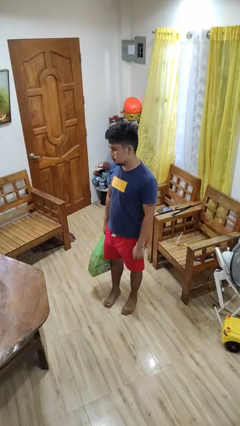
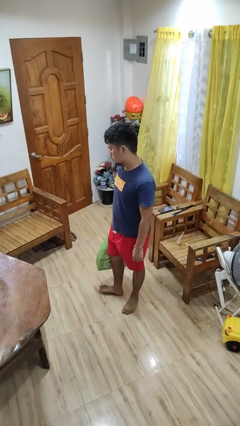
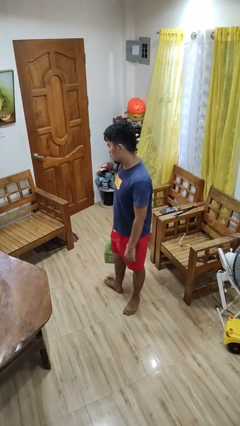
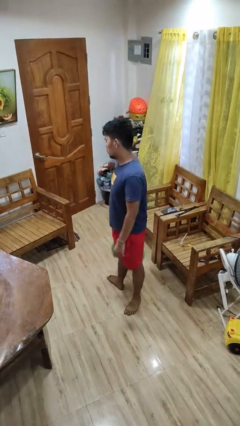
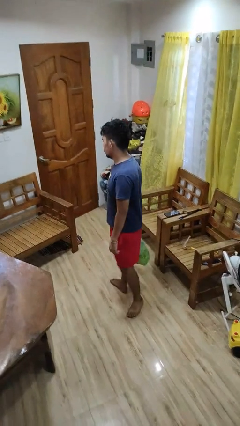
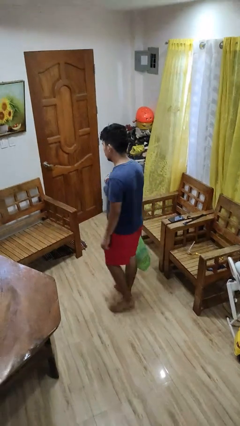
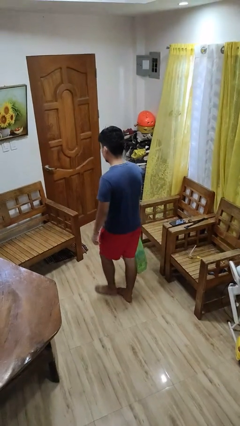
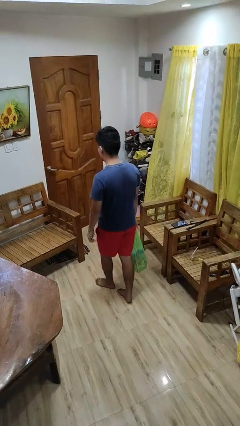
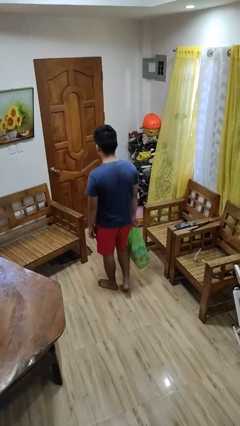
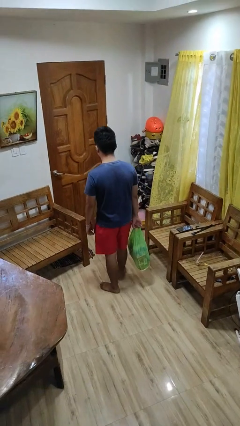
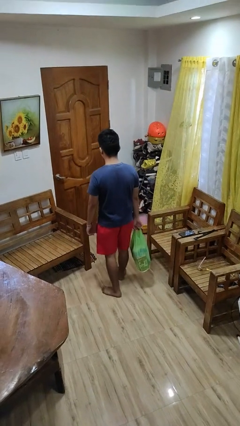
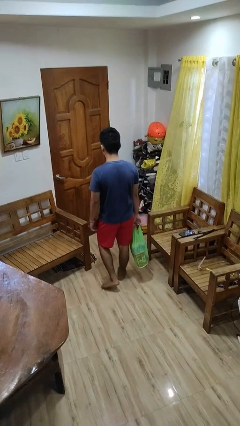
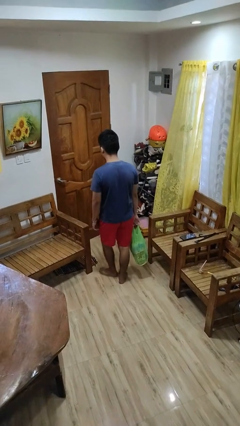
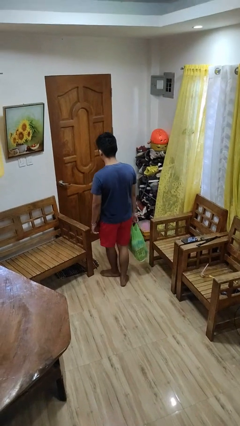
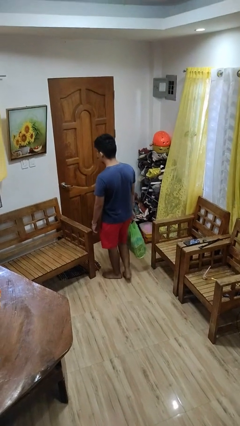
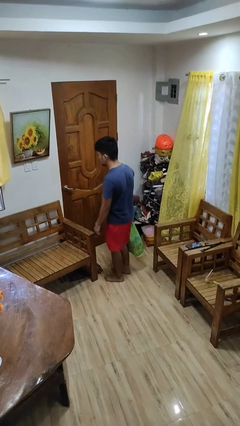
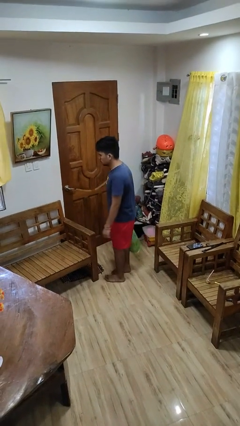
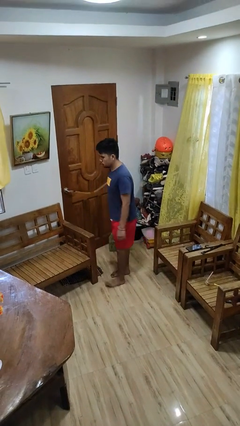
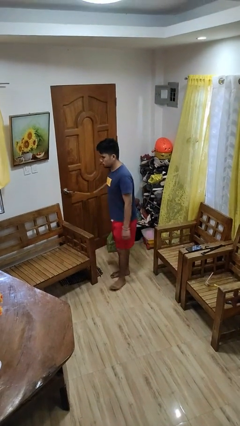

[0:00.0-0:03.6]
person carries groceries

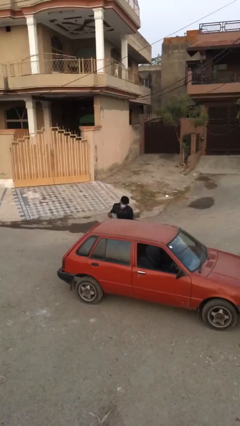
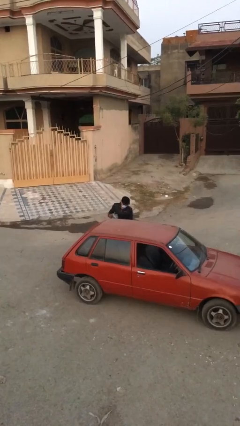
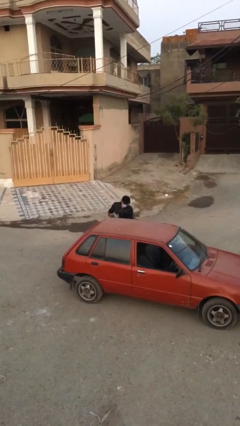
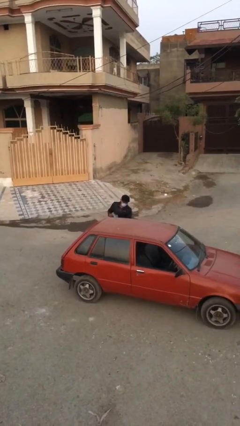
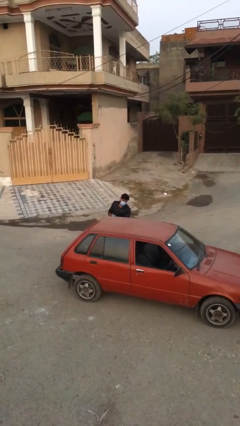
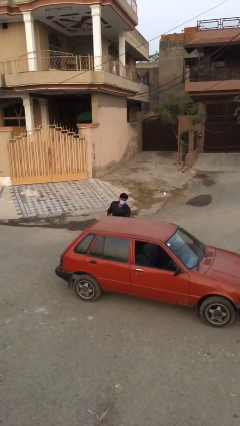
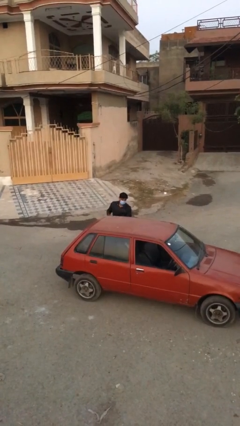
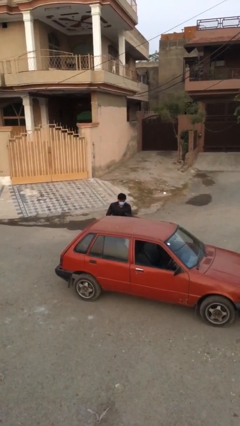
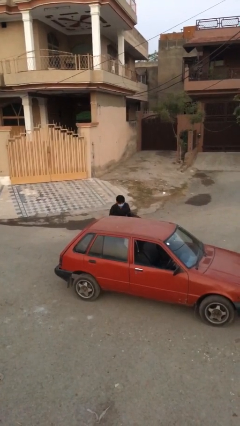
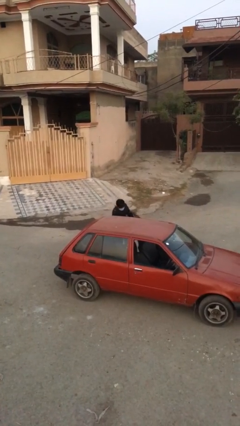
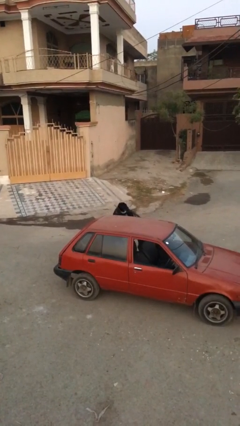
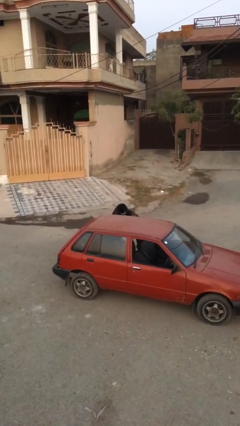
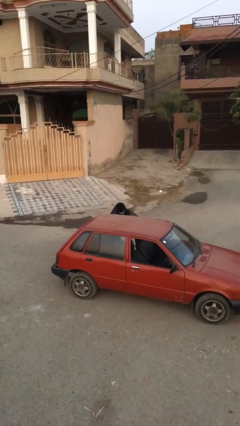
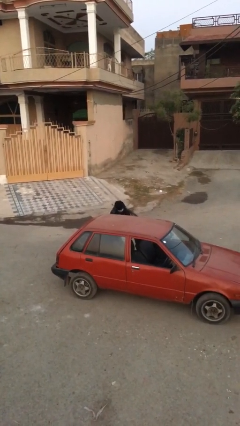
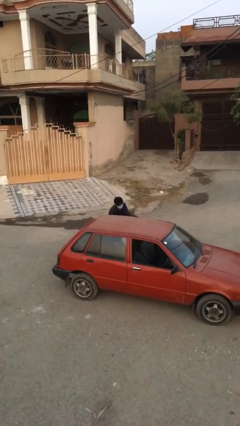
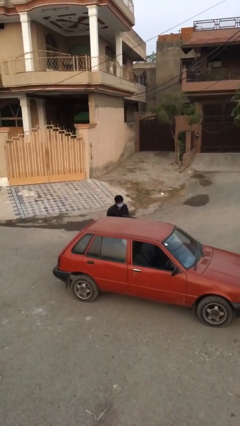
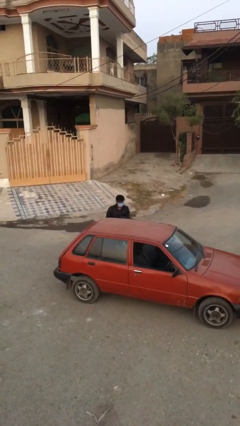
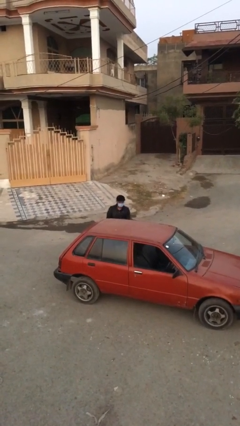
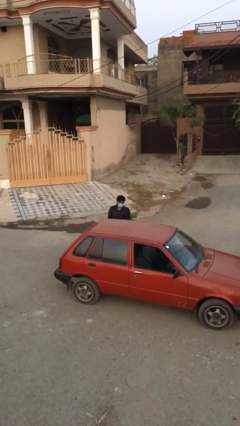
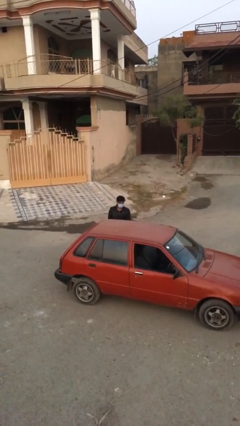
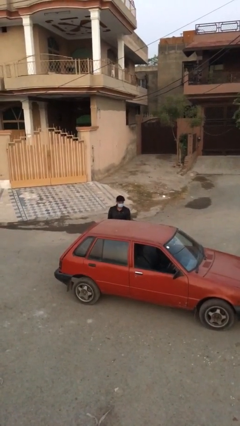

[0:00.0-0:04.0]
person loads car

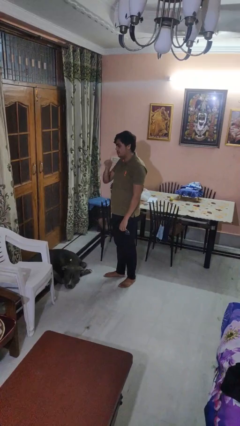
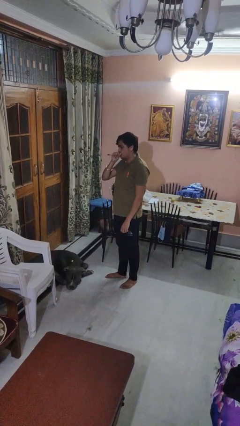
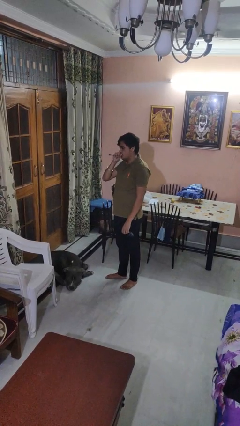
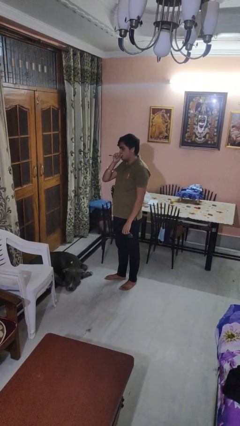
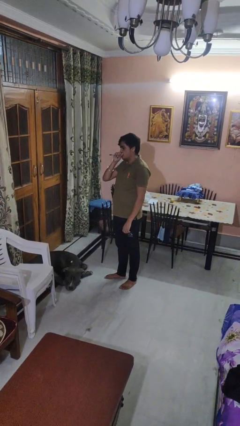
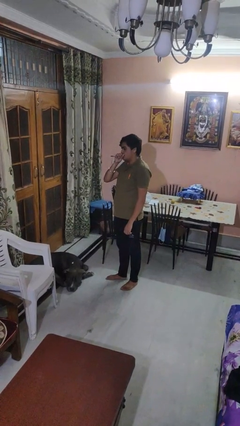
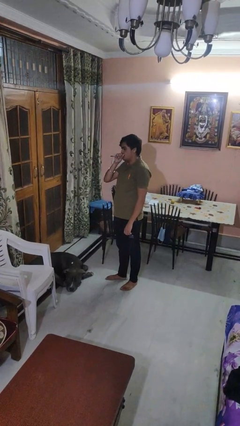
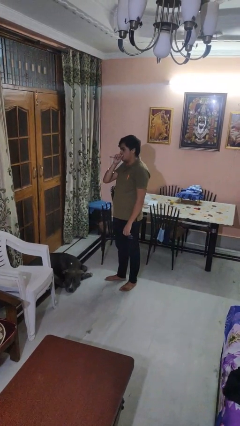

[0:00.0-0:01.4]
person vapes

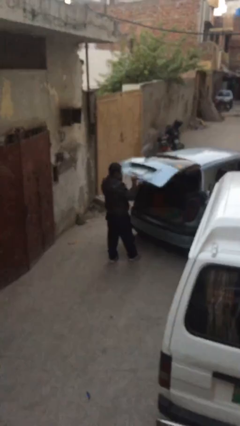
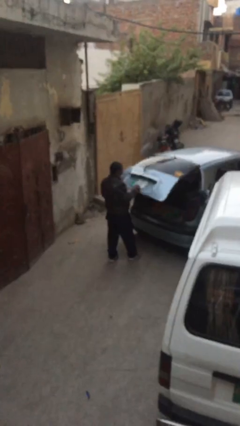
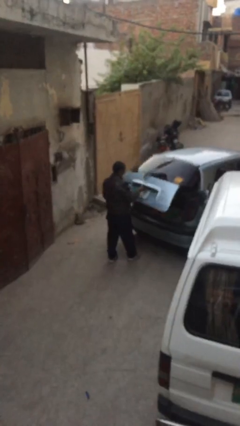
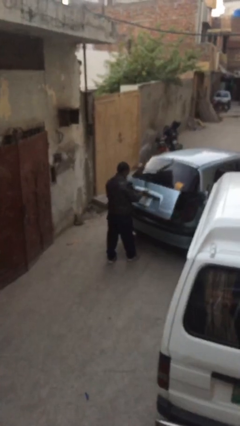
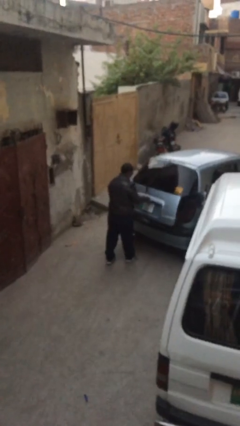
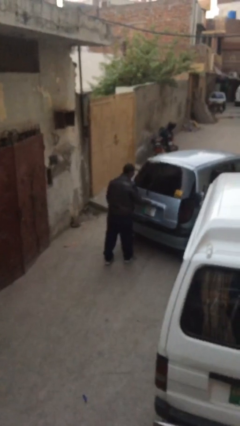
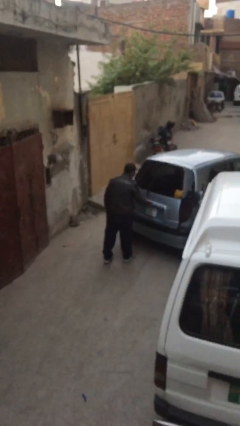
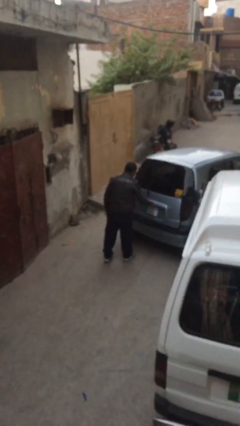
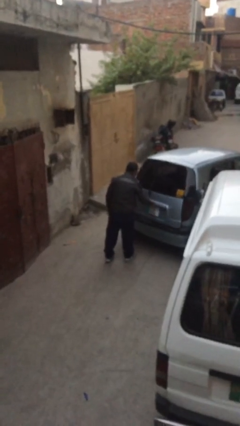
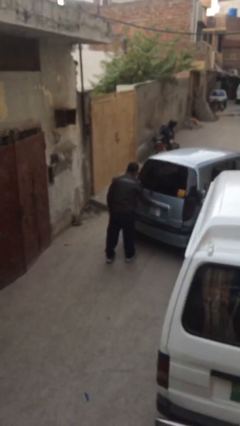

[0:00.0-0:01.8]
person closes car trunk

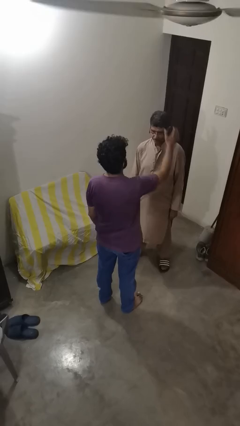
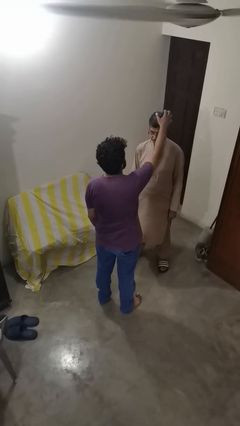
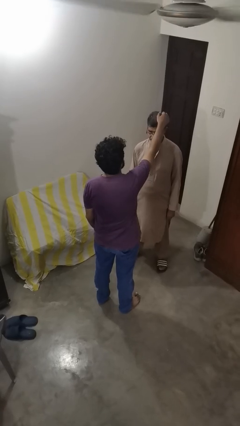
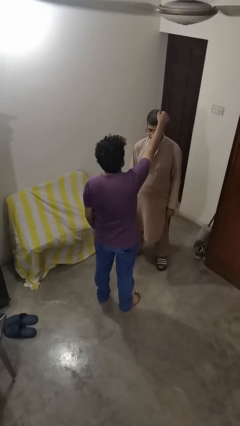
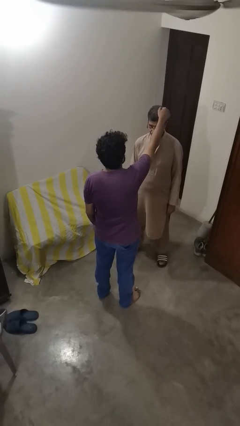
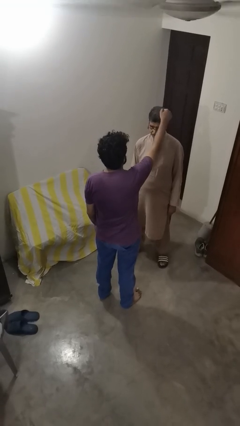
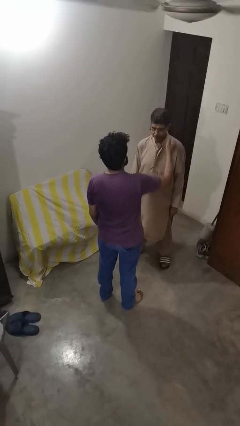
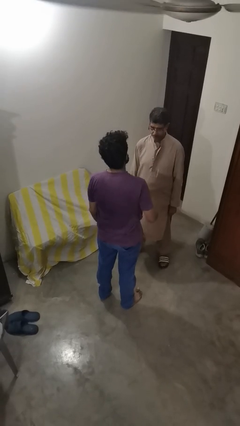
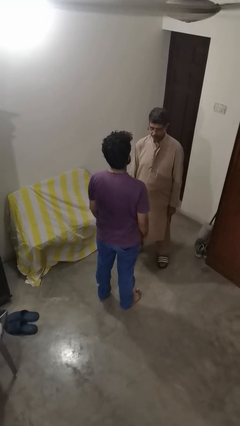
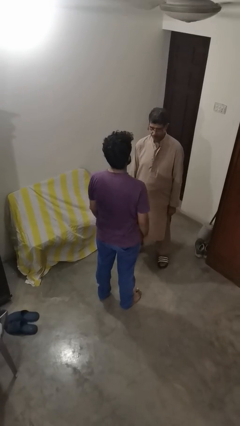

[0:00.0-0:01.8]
person grabs person by hair

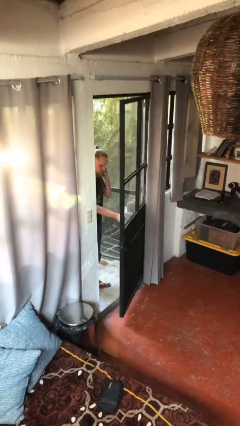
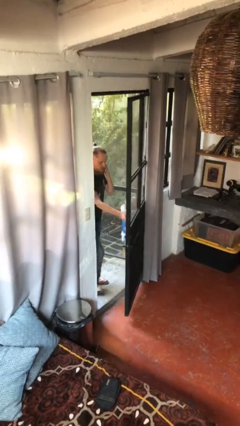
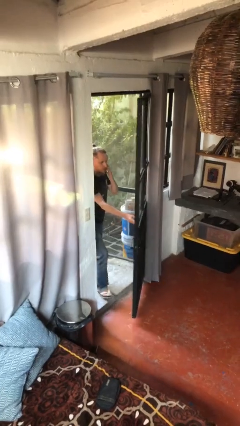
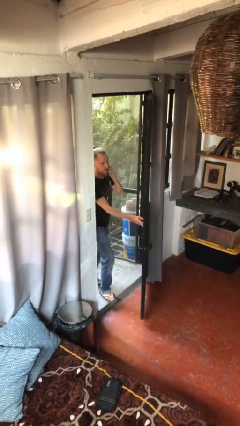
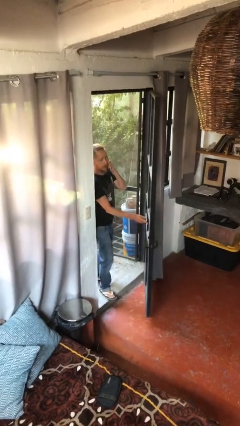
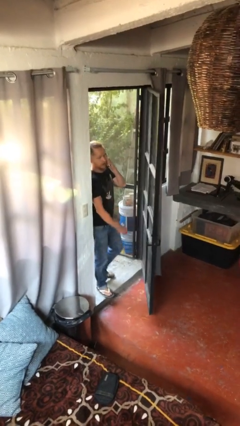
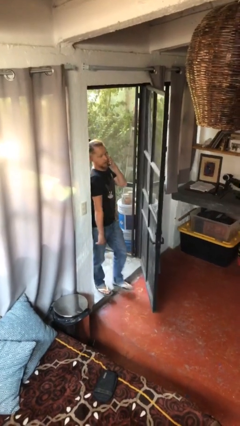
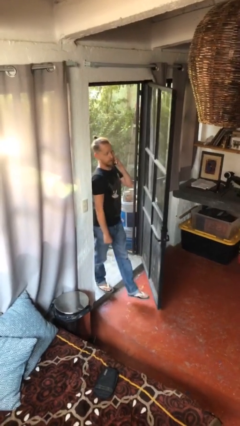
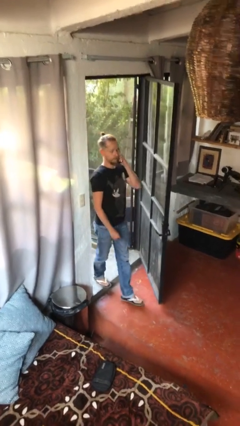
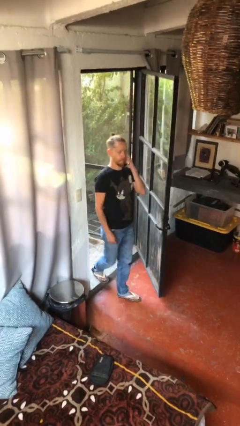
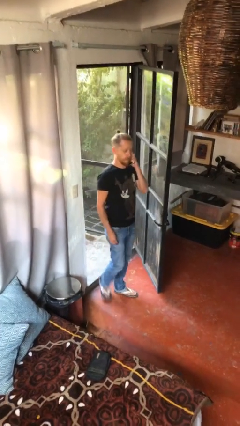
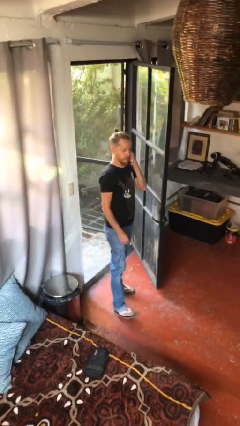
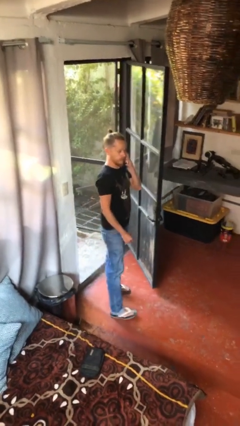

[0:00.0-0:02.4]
person enters scene through structure

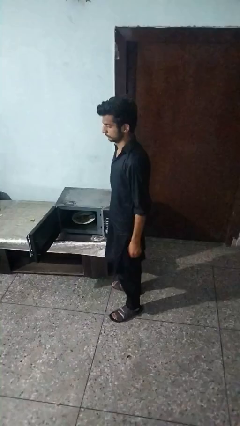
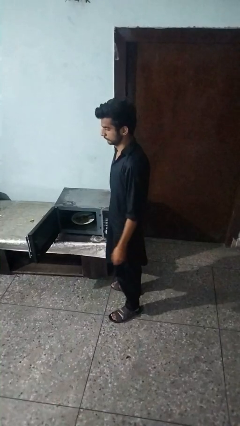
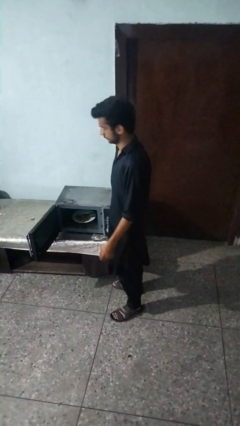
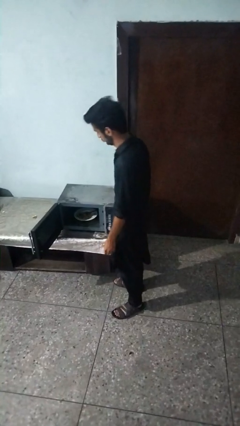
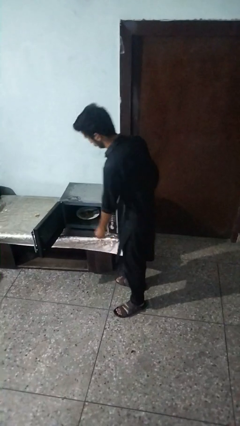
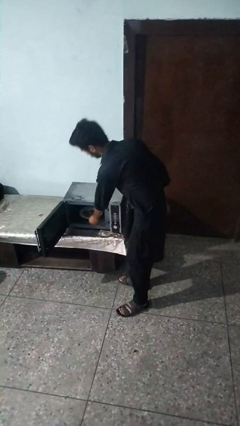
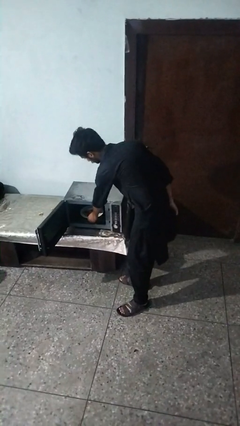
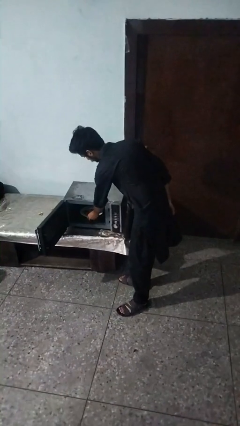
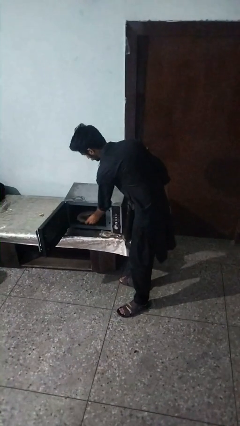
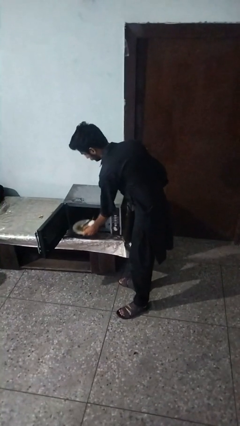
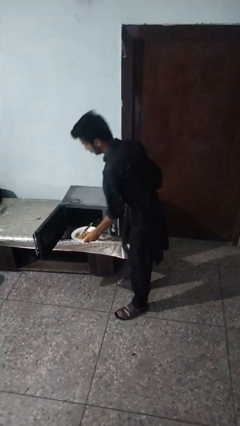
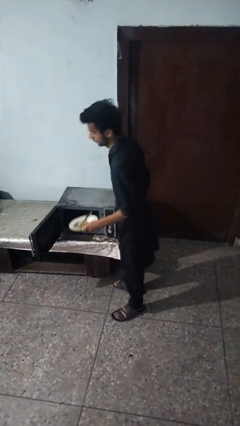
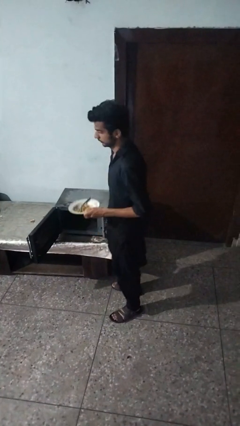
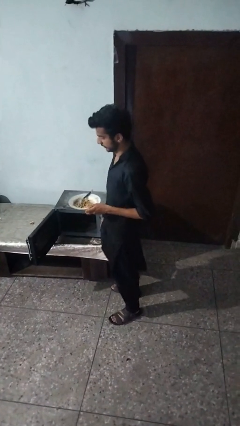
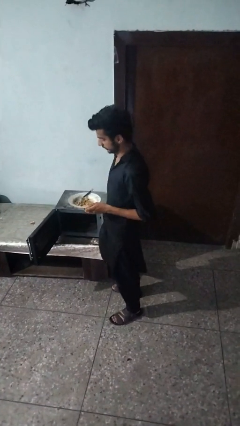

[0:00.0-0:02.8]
person takes object from oven
